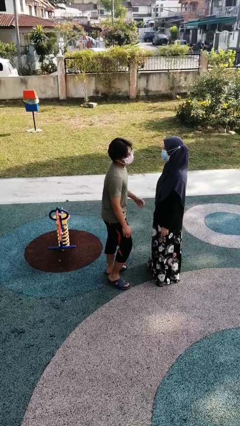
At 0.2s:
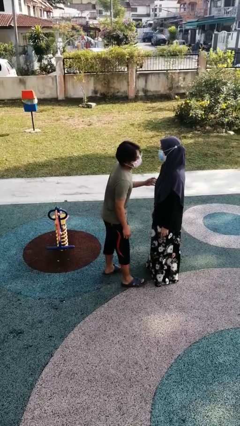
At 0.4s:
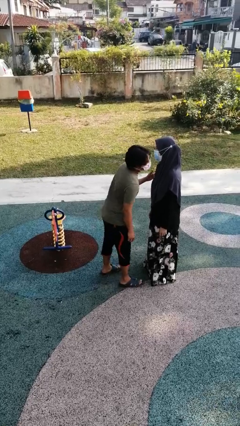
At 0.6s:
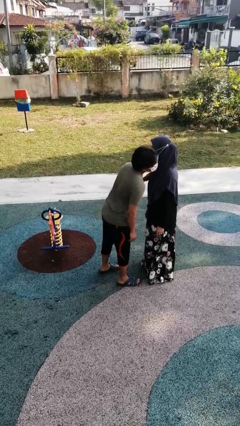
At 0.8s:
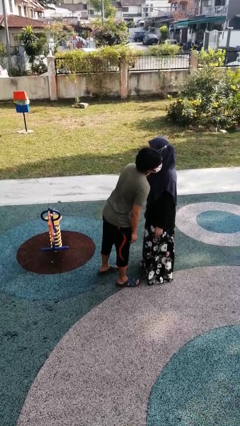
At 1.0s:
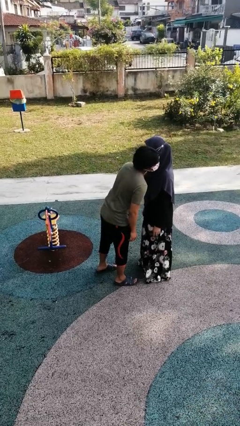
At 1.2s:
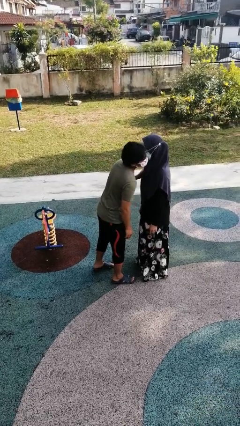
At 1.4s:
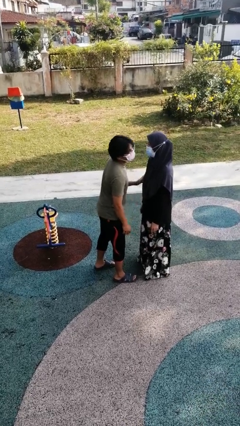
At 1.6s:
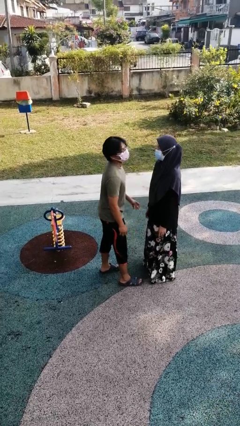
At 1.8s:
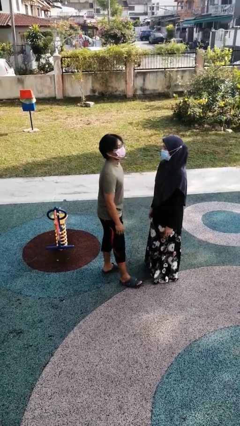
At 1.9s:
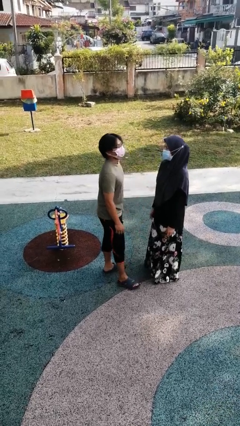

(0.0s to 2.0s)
person kisses cheek of person

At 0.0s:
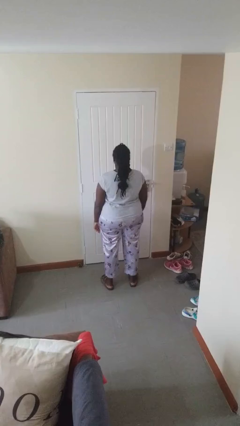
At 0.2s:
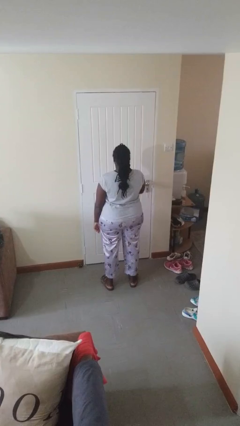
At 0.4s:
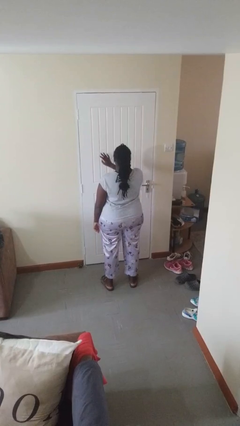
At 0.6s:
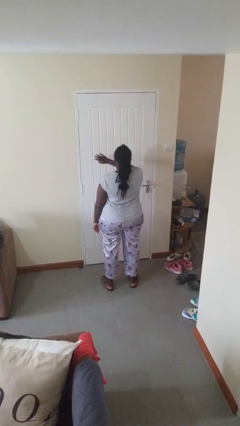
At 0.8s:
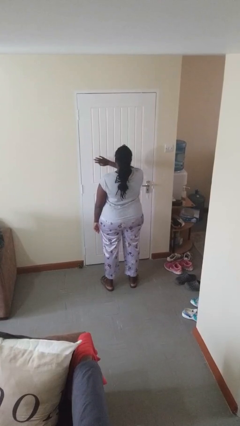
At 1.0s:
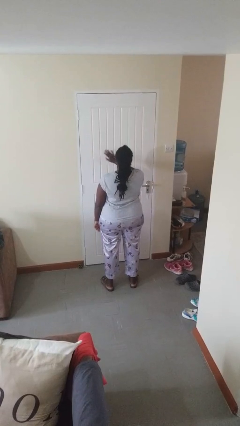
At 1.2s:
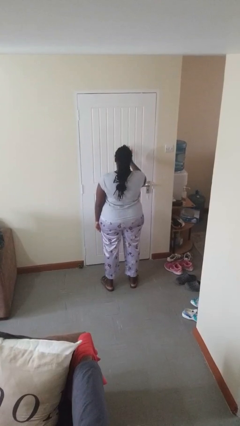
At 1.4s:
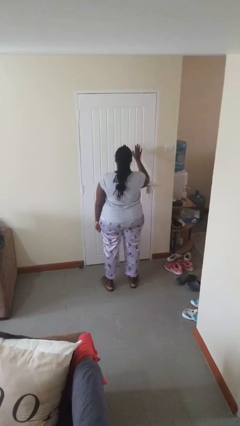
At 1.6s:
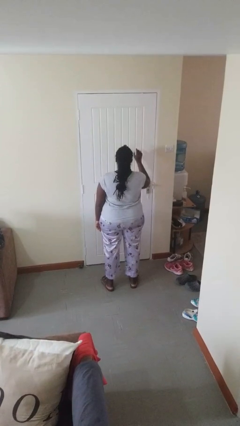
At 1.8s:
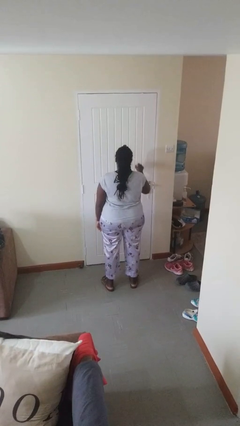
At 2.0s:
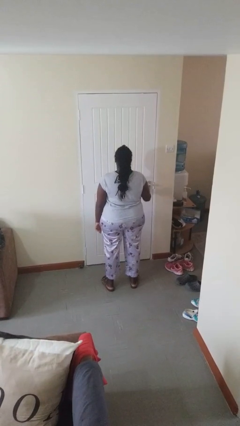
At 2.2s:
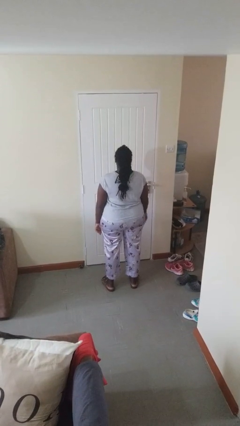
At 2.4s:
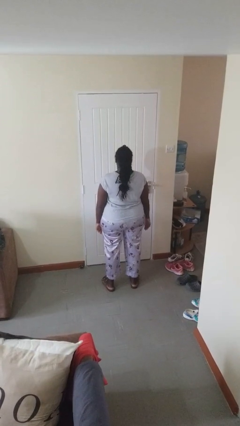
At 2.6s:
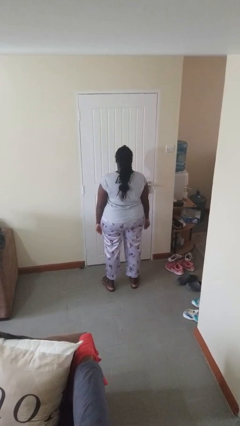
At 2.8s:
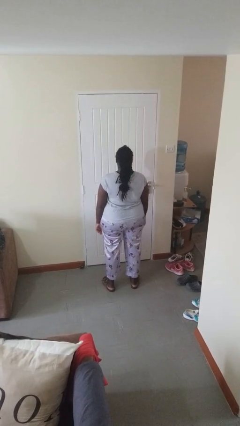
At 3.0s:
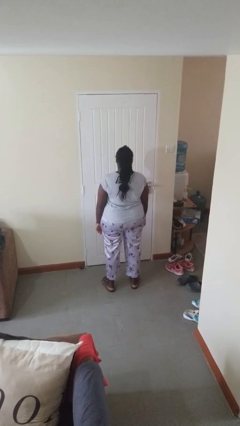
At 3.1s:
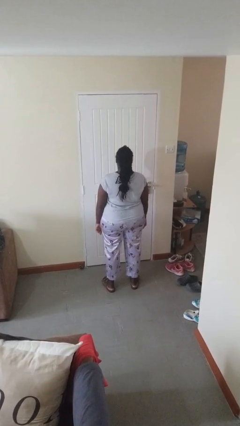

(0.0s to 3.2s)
person gestures swipe right

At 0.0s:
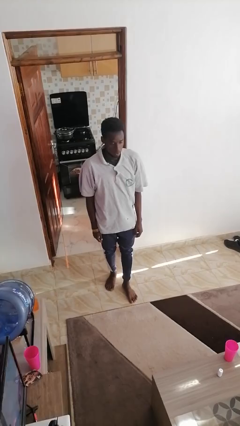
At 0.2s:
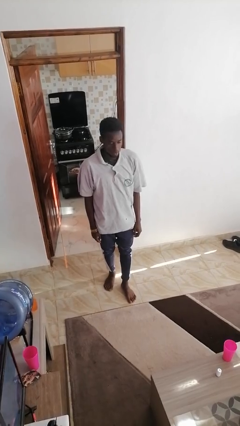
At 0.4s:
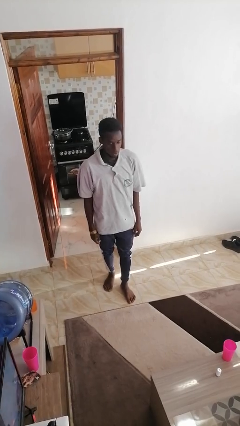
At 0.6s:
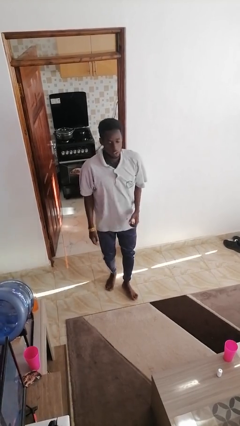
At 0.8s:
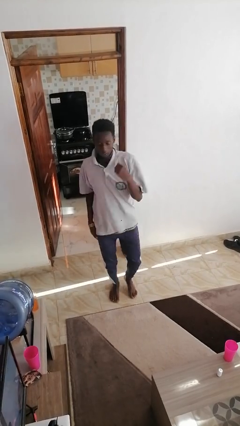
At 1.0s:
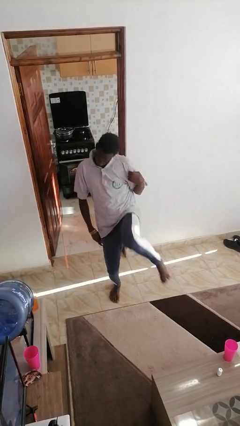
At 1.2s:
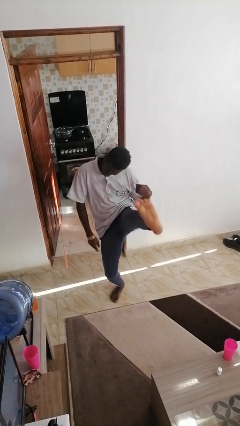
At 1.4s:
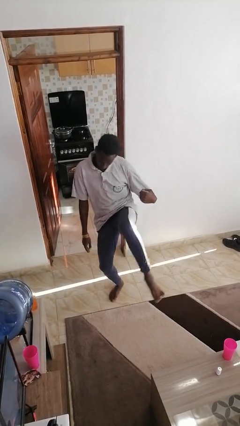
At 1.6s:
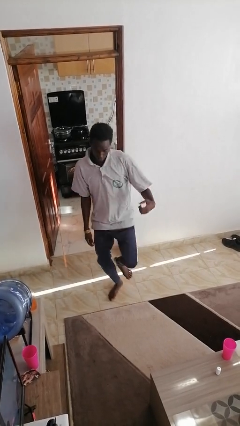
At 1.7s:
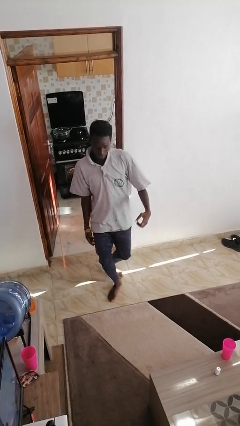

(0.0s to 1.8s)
person karate kicks

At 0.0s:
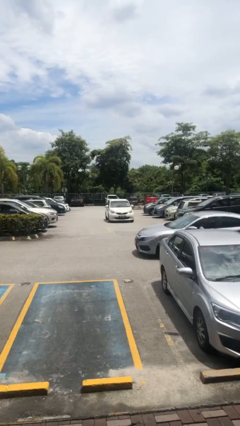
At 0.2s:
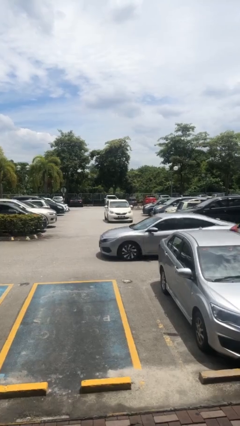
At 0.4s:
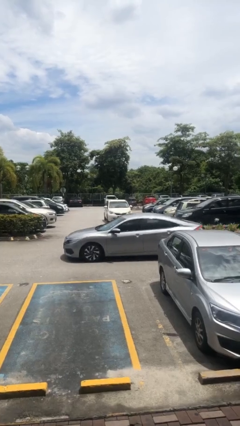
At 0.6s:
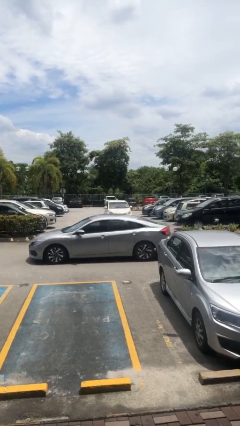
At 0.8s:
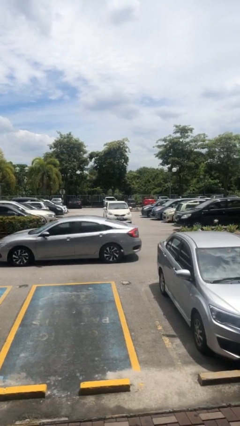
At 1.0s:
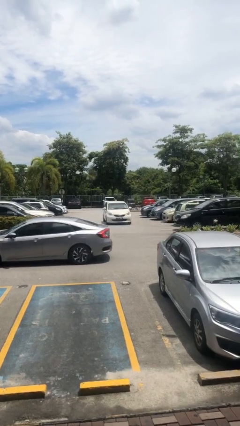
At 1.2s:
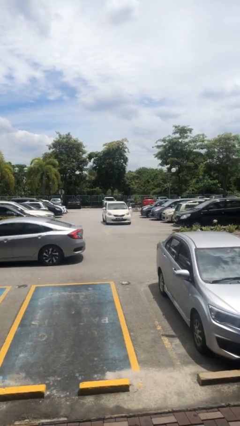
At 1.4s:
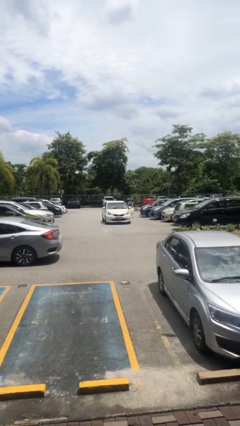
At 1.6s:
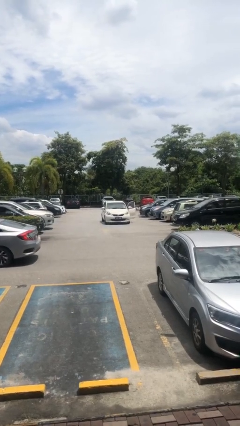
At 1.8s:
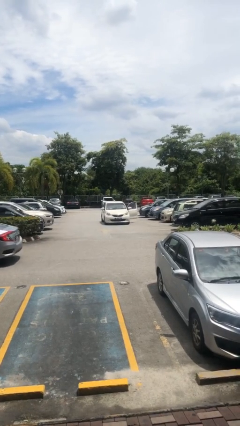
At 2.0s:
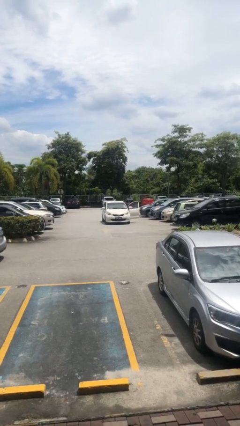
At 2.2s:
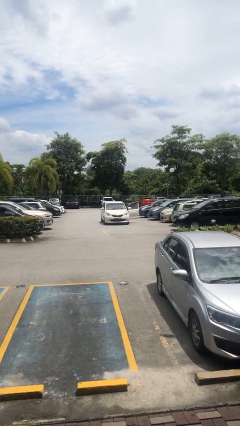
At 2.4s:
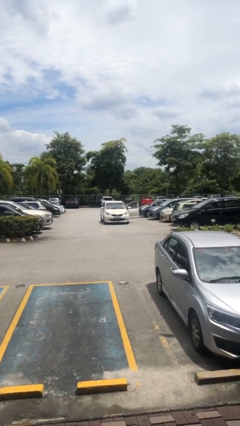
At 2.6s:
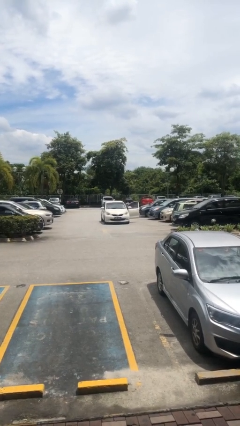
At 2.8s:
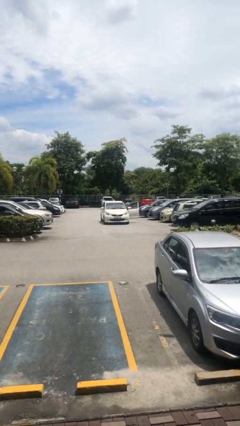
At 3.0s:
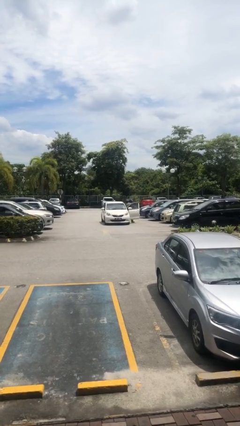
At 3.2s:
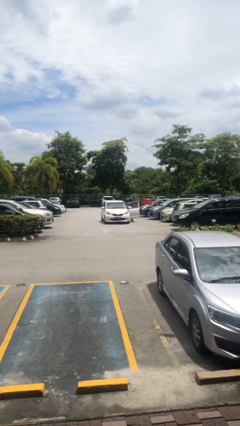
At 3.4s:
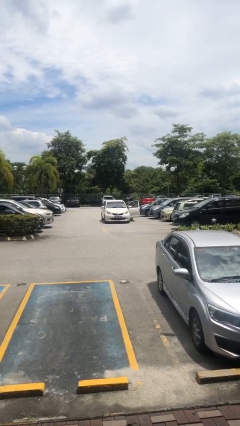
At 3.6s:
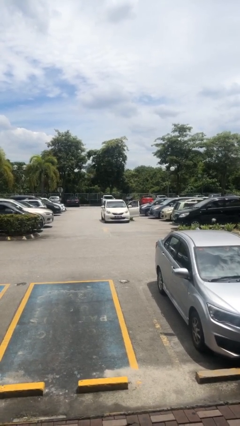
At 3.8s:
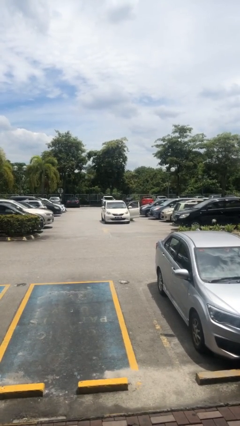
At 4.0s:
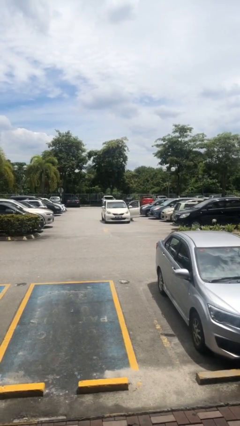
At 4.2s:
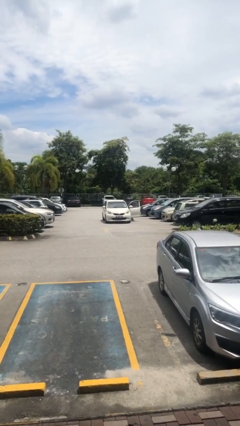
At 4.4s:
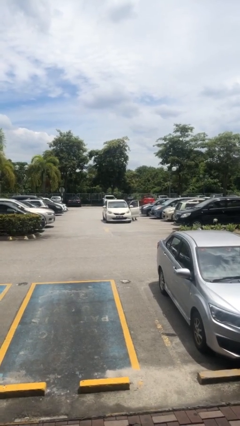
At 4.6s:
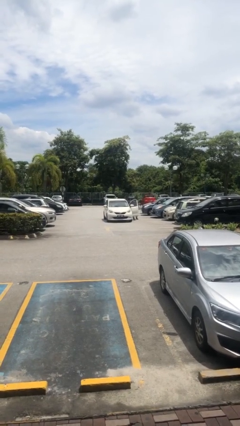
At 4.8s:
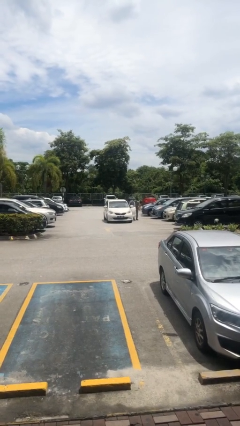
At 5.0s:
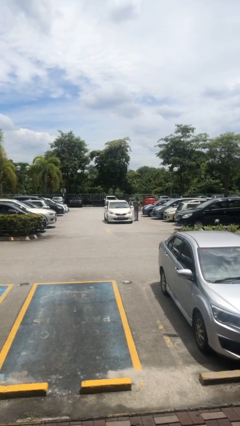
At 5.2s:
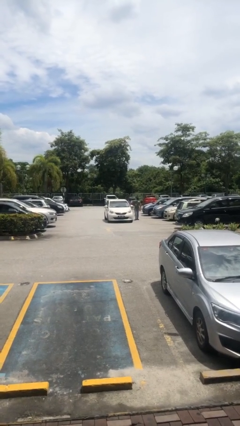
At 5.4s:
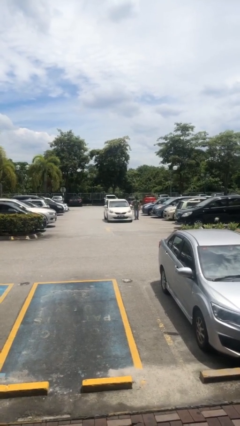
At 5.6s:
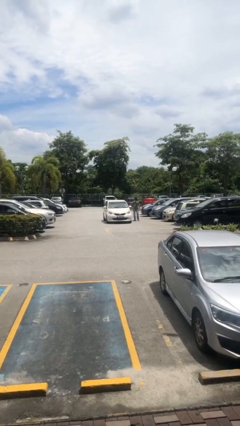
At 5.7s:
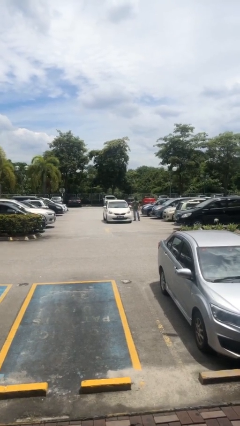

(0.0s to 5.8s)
car drops off person

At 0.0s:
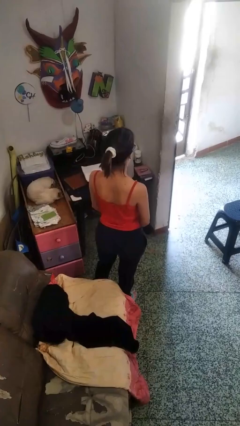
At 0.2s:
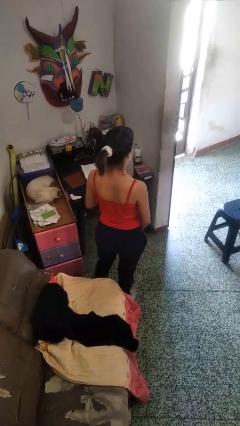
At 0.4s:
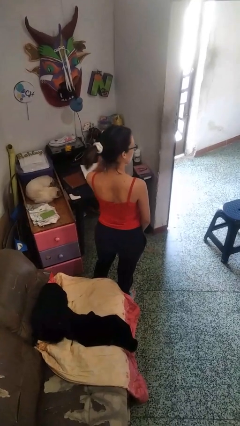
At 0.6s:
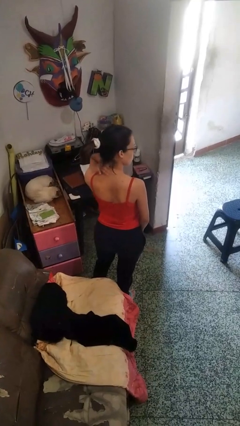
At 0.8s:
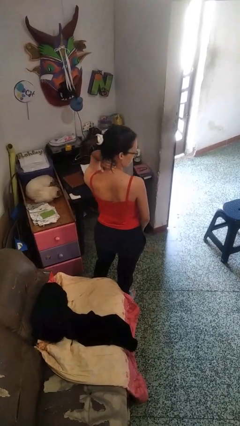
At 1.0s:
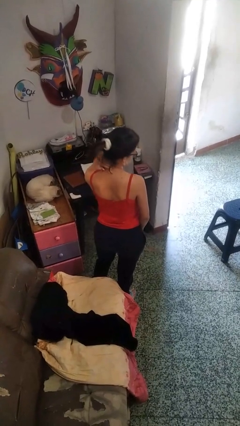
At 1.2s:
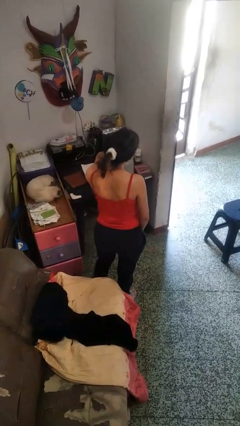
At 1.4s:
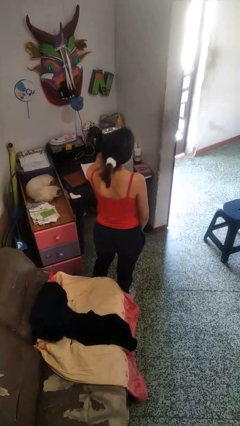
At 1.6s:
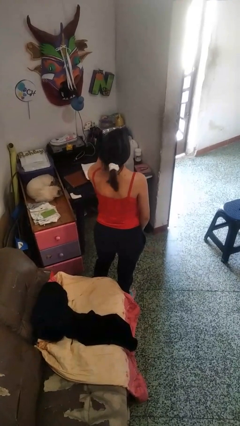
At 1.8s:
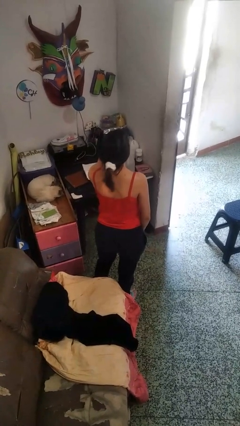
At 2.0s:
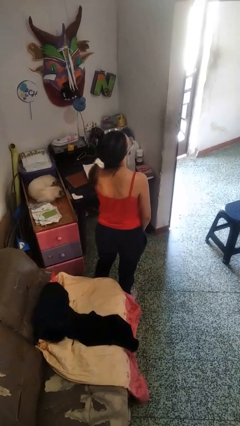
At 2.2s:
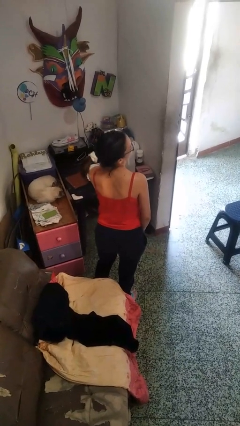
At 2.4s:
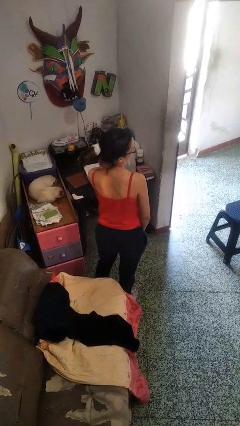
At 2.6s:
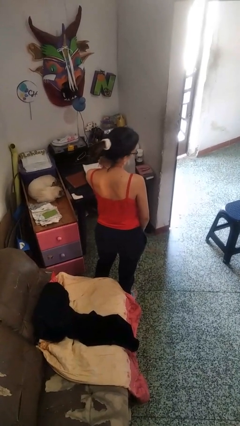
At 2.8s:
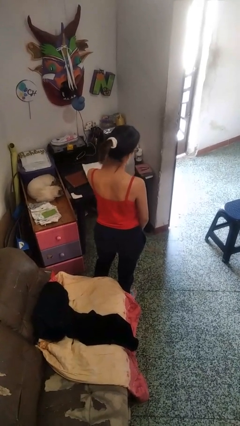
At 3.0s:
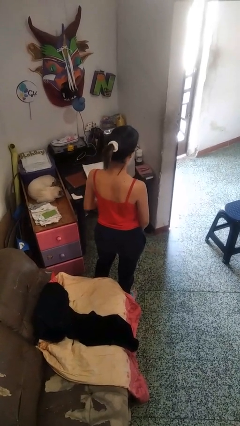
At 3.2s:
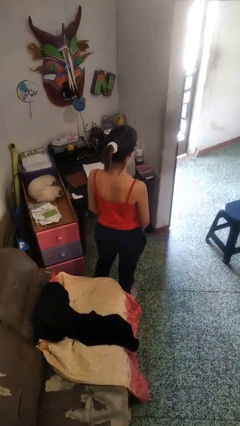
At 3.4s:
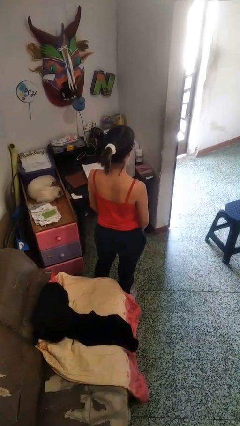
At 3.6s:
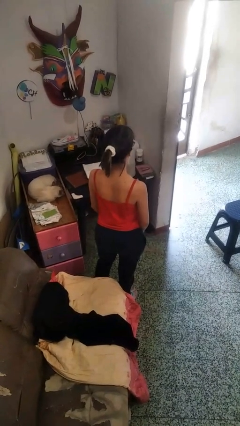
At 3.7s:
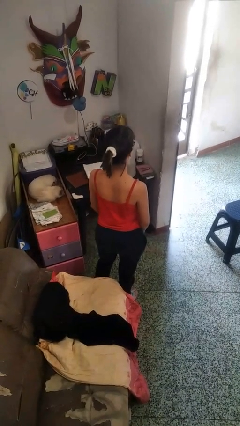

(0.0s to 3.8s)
person rubs neck

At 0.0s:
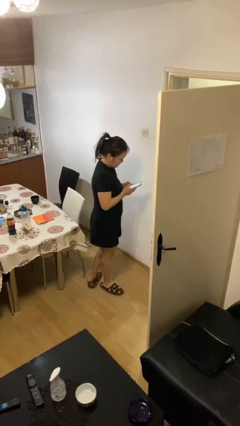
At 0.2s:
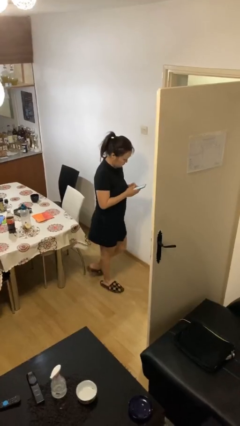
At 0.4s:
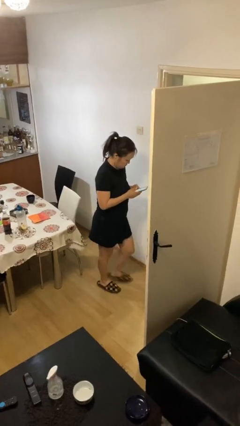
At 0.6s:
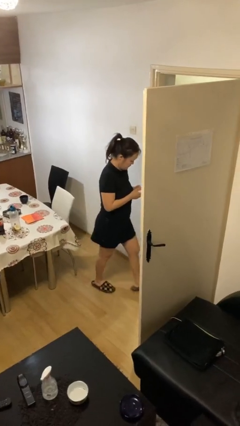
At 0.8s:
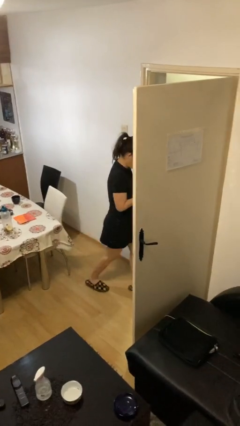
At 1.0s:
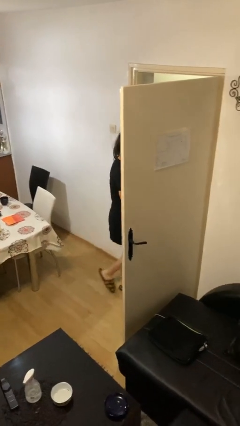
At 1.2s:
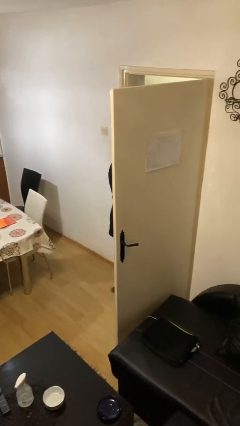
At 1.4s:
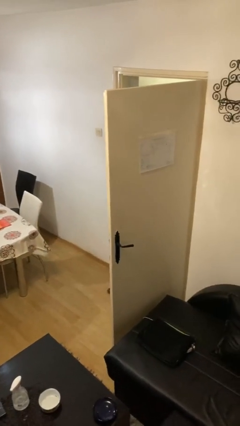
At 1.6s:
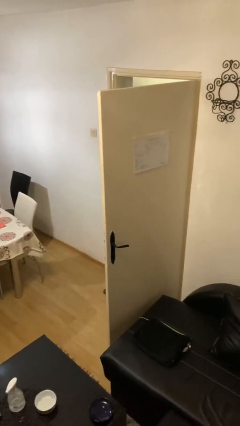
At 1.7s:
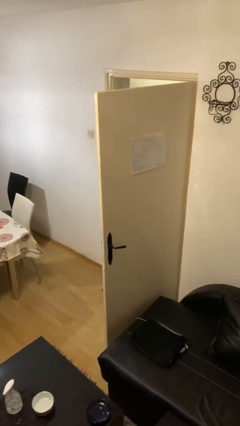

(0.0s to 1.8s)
person exits scene through structure
